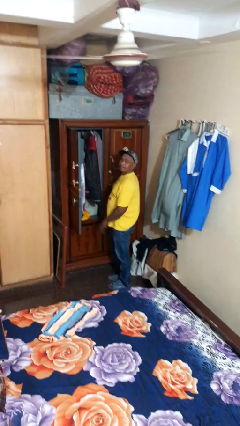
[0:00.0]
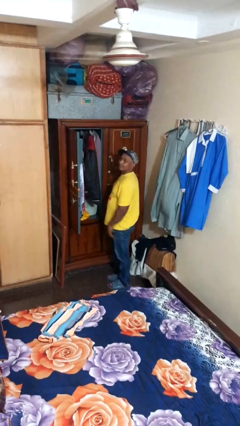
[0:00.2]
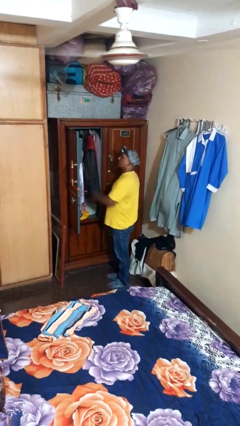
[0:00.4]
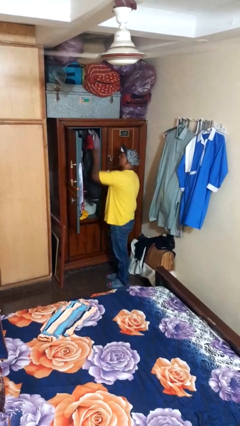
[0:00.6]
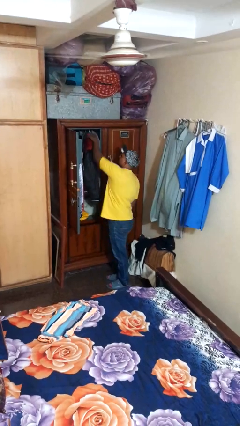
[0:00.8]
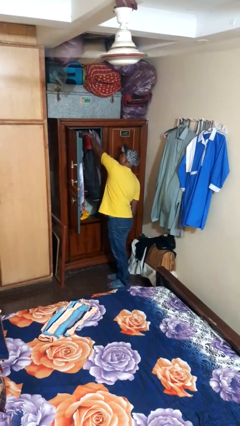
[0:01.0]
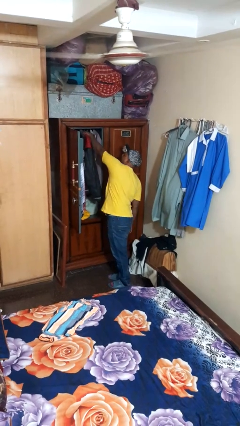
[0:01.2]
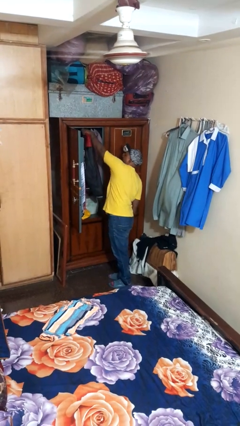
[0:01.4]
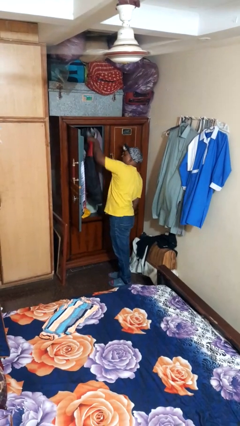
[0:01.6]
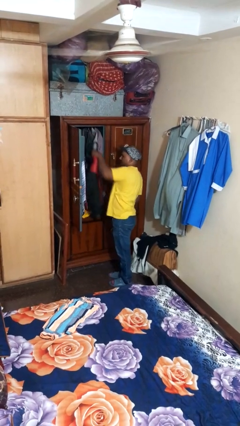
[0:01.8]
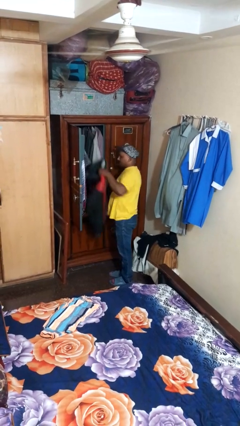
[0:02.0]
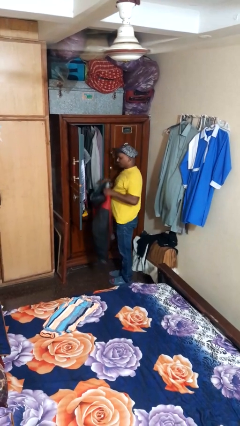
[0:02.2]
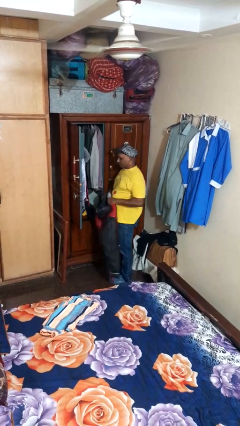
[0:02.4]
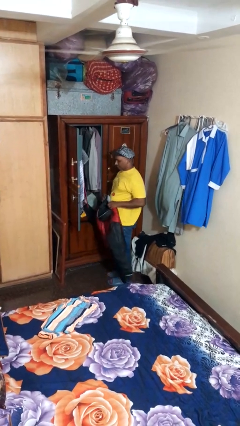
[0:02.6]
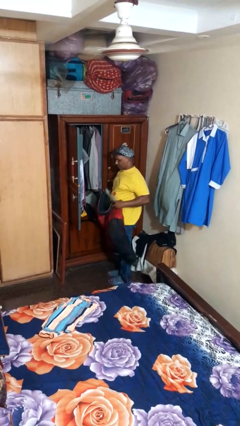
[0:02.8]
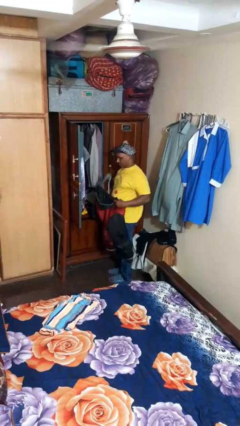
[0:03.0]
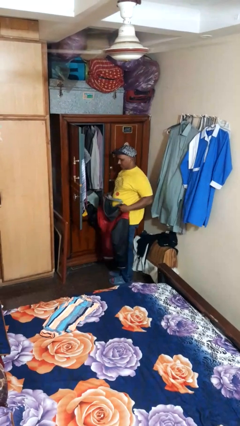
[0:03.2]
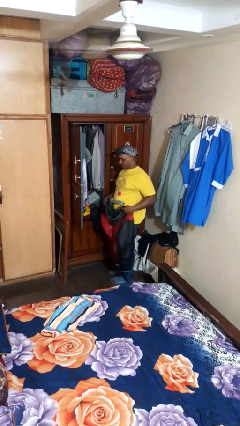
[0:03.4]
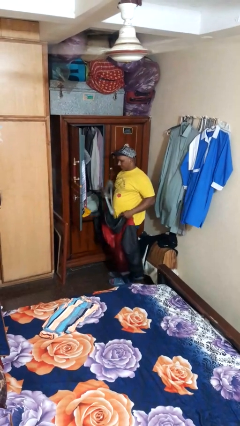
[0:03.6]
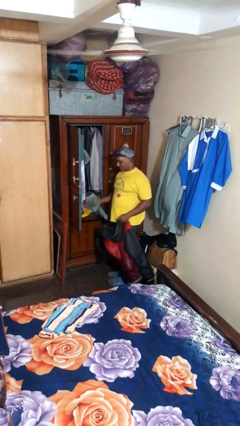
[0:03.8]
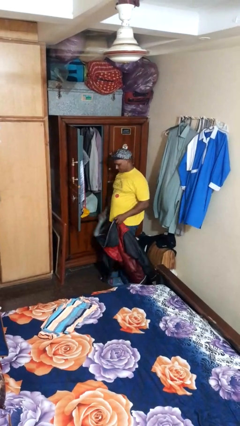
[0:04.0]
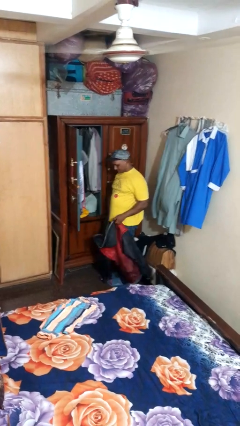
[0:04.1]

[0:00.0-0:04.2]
person takes clothes from closet

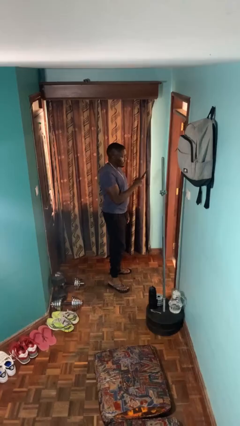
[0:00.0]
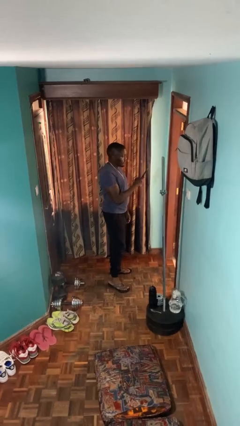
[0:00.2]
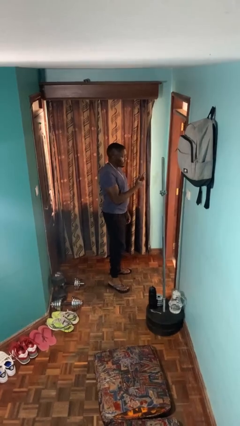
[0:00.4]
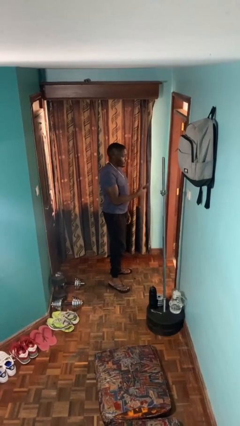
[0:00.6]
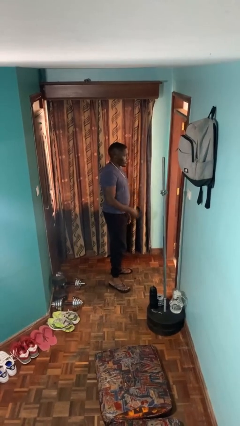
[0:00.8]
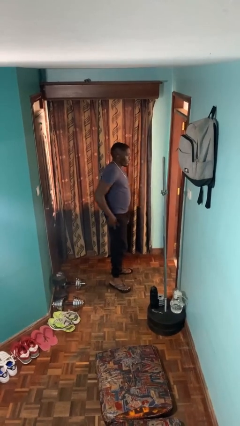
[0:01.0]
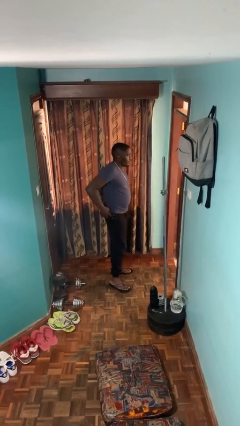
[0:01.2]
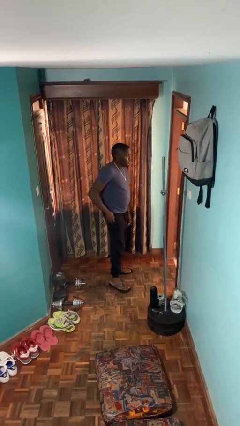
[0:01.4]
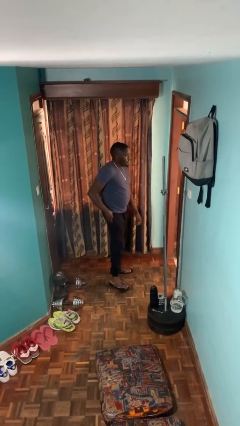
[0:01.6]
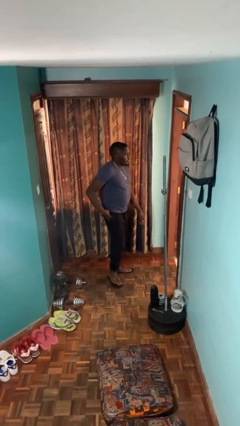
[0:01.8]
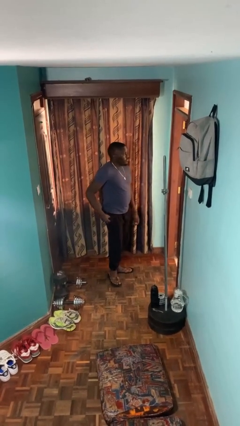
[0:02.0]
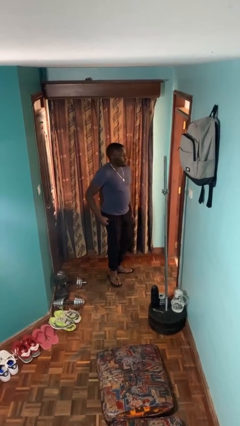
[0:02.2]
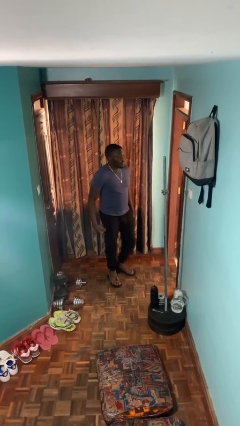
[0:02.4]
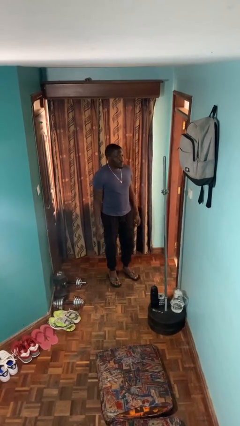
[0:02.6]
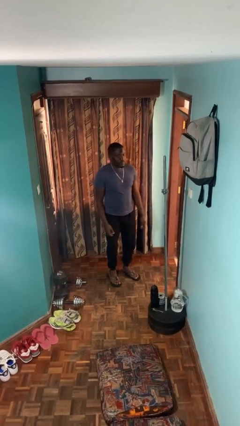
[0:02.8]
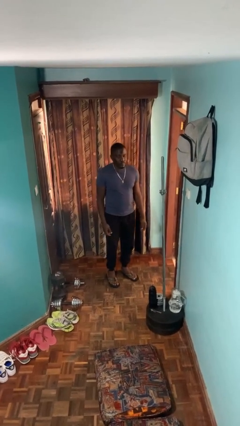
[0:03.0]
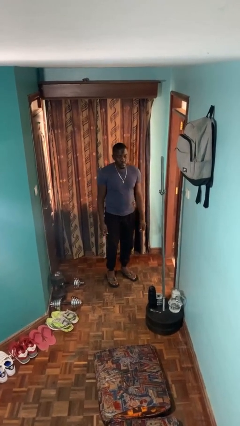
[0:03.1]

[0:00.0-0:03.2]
person puts phone into pocket

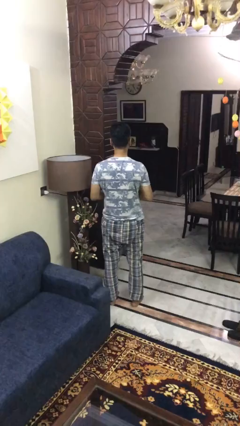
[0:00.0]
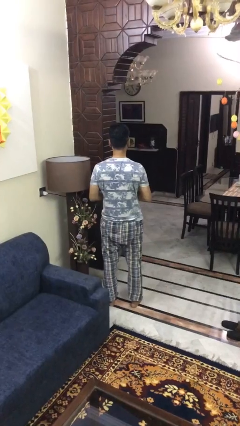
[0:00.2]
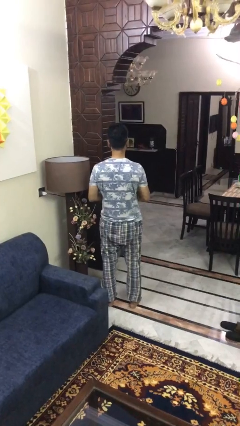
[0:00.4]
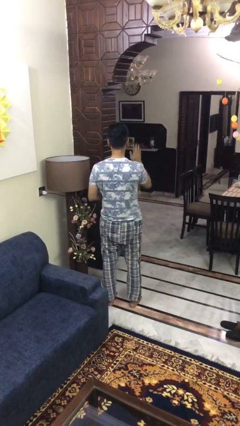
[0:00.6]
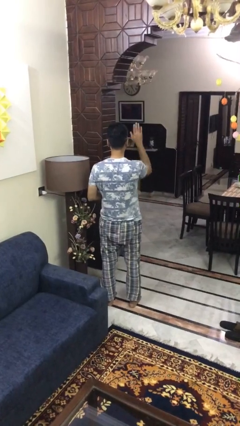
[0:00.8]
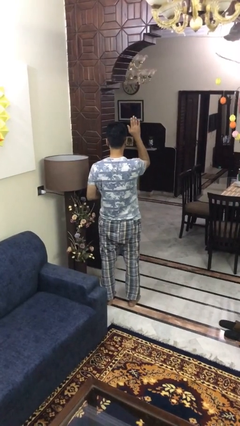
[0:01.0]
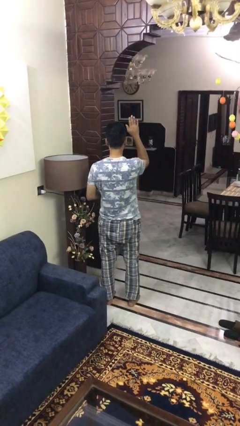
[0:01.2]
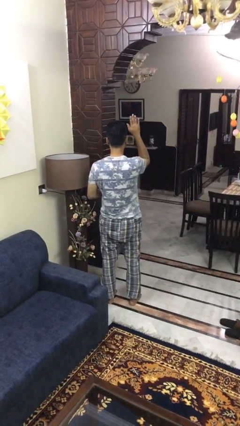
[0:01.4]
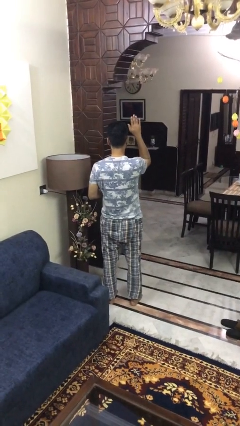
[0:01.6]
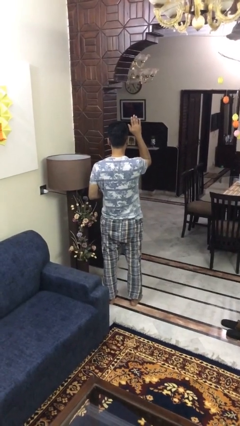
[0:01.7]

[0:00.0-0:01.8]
person gestures raise hand

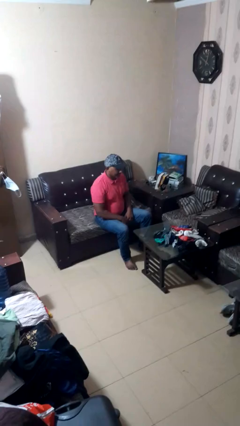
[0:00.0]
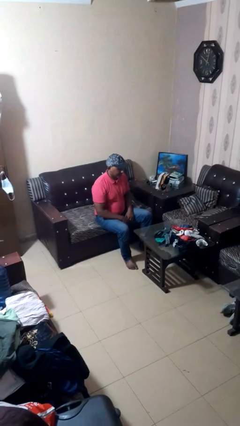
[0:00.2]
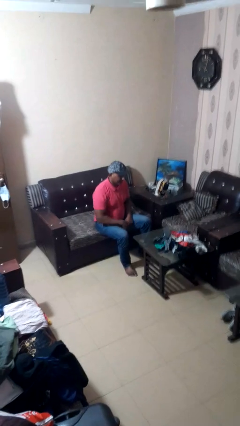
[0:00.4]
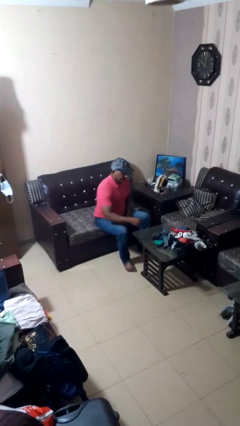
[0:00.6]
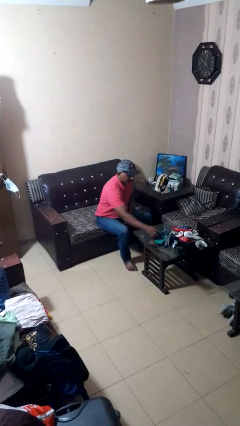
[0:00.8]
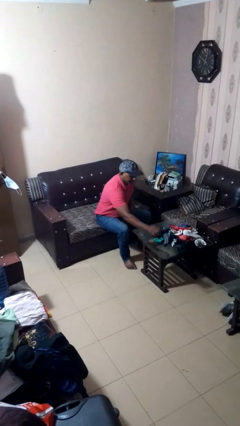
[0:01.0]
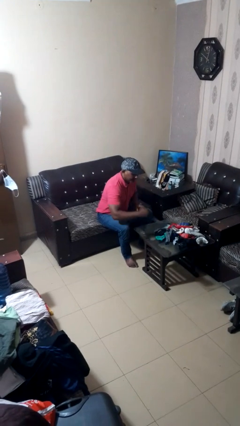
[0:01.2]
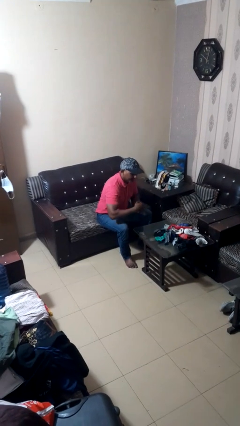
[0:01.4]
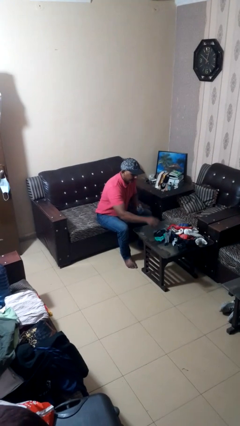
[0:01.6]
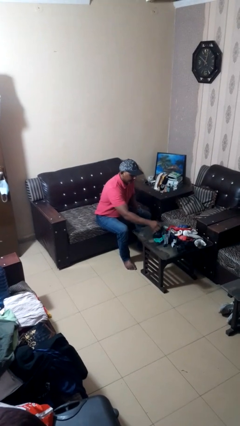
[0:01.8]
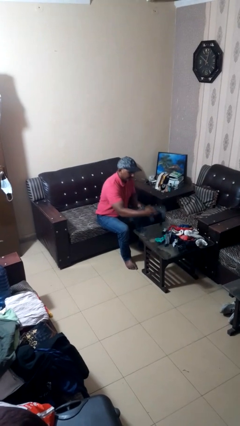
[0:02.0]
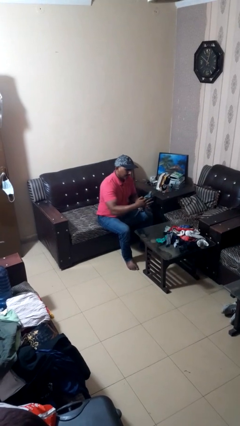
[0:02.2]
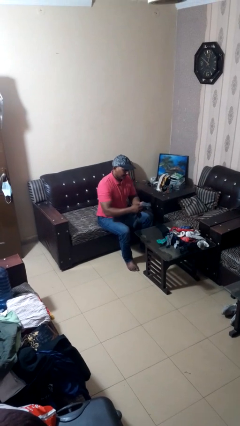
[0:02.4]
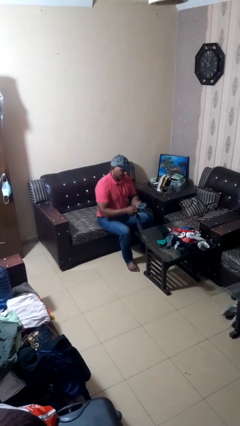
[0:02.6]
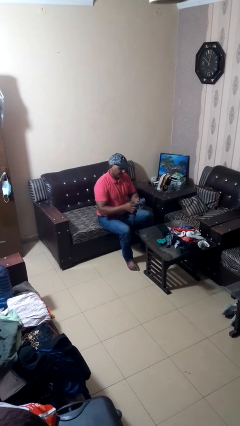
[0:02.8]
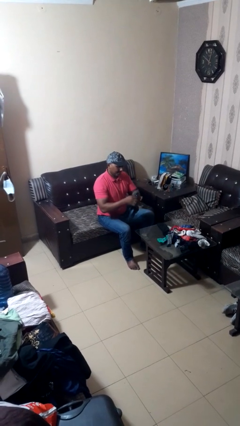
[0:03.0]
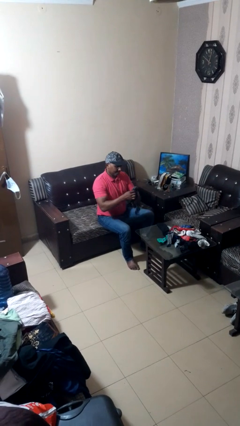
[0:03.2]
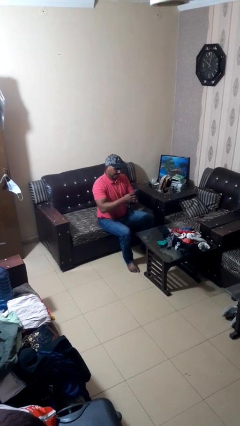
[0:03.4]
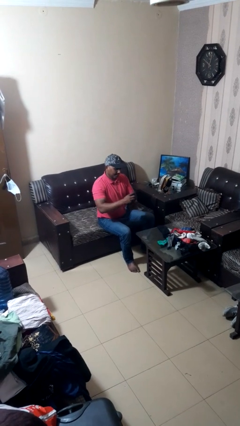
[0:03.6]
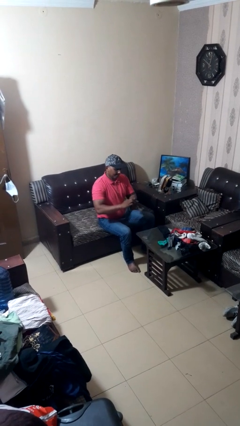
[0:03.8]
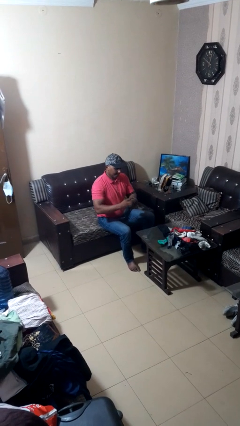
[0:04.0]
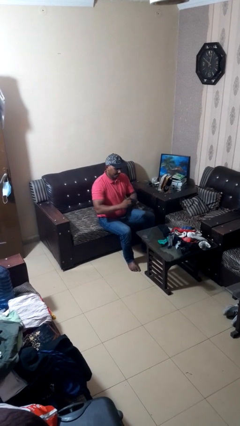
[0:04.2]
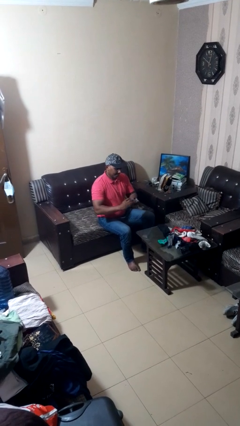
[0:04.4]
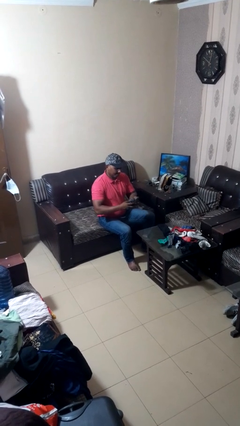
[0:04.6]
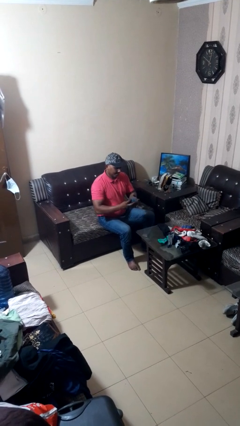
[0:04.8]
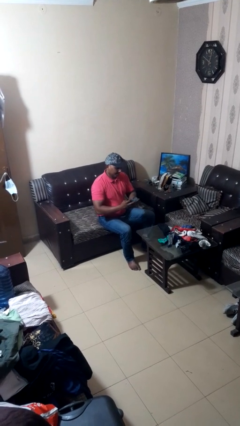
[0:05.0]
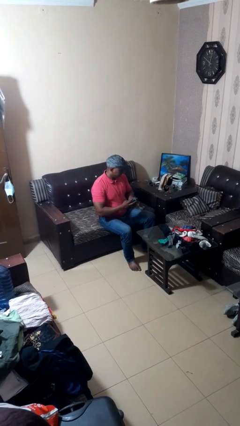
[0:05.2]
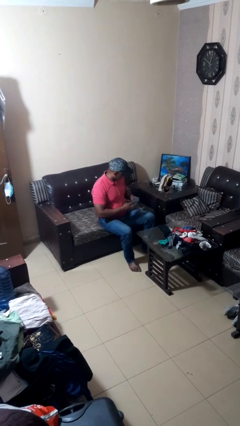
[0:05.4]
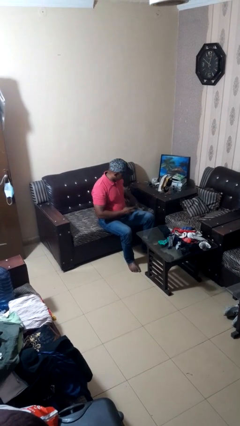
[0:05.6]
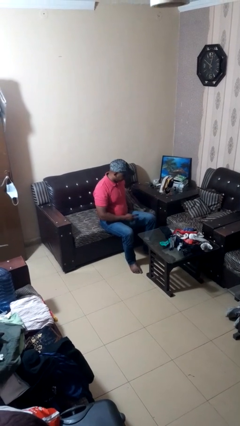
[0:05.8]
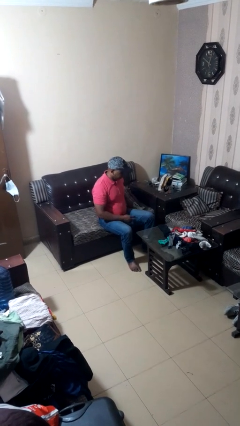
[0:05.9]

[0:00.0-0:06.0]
person folds socks

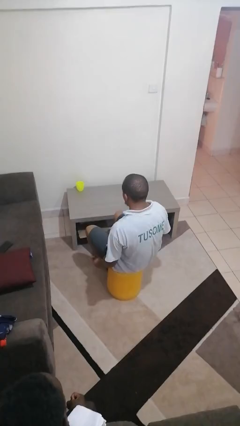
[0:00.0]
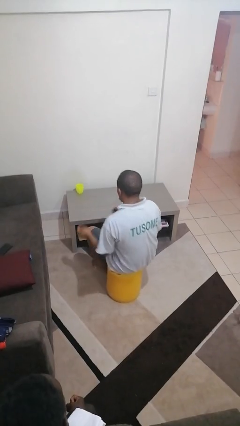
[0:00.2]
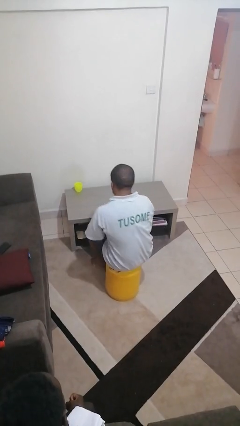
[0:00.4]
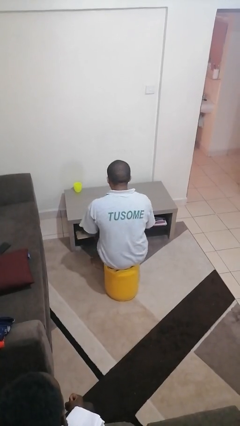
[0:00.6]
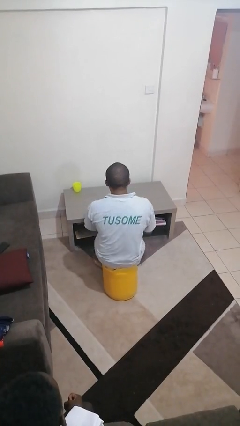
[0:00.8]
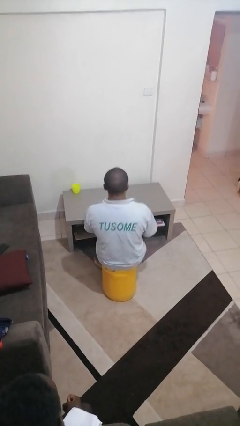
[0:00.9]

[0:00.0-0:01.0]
person puts feet up

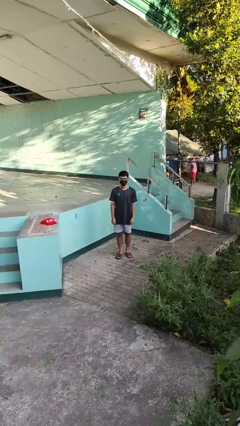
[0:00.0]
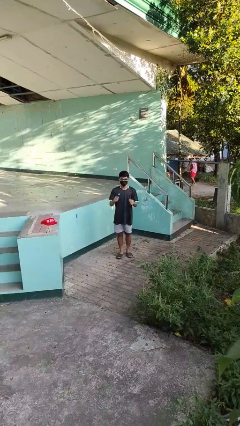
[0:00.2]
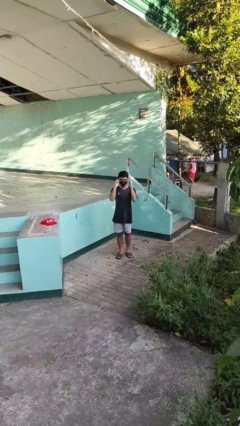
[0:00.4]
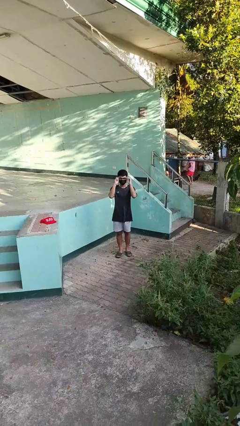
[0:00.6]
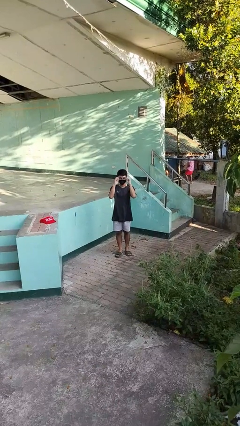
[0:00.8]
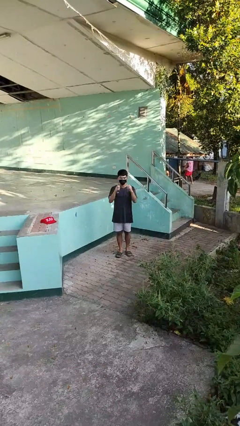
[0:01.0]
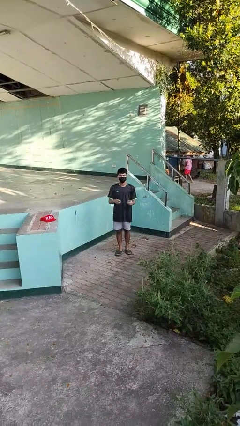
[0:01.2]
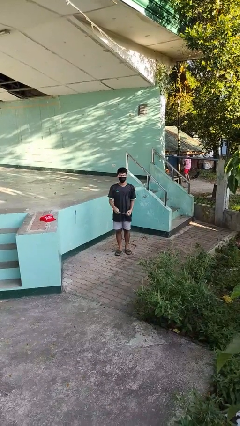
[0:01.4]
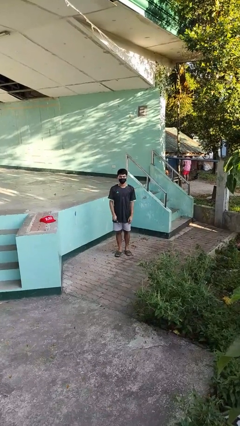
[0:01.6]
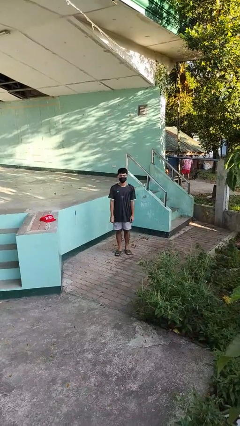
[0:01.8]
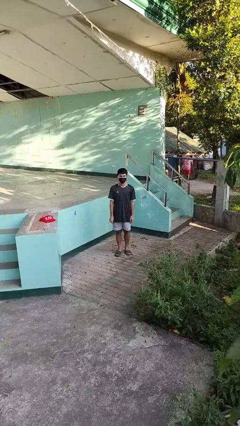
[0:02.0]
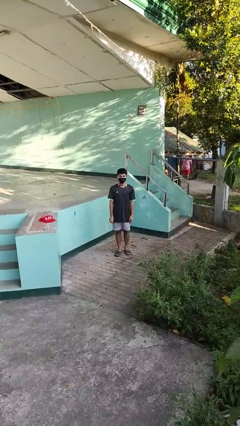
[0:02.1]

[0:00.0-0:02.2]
person takes off glasses
